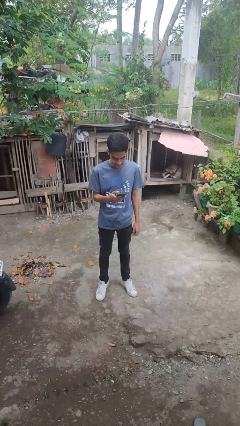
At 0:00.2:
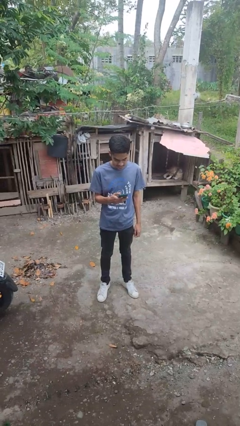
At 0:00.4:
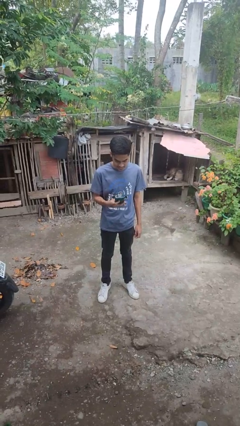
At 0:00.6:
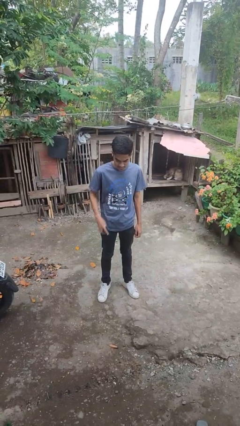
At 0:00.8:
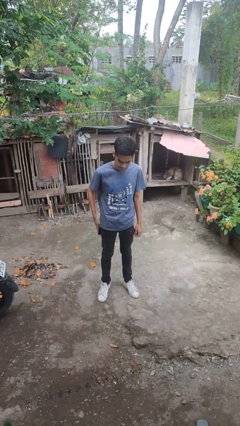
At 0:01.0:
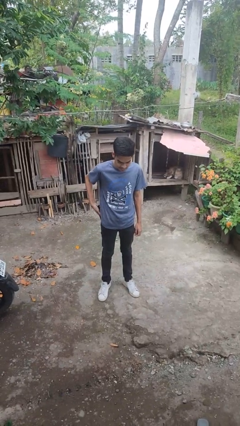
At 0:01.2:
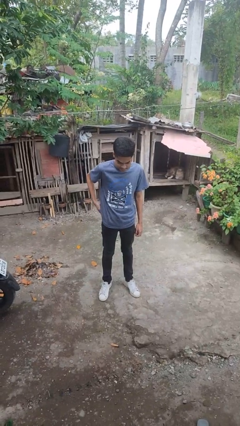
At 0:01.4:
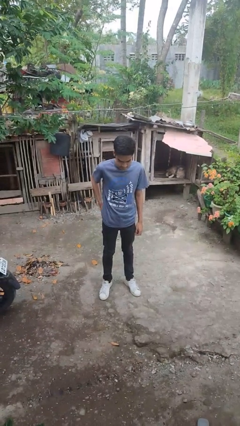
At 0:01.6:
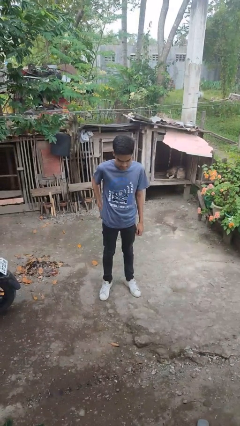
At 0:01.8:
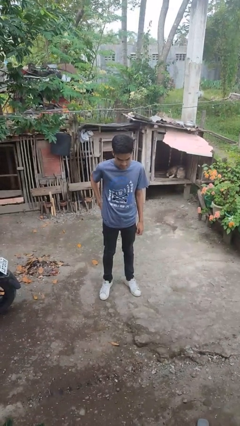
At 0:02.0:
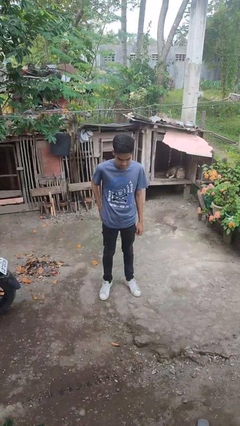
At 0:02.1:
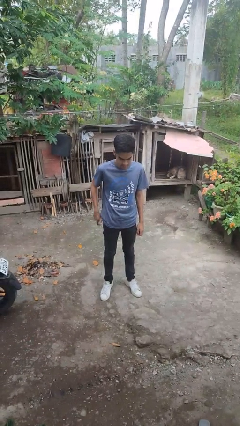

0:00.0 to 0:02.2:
person puts phone into pocket

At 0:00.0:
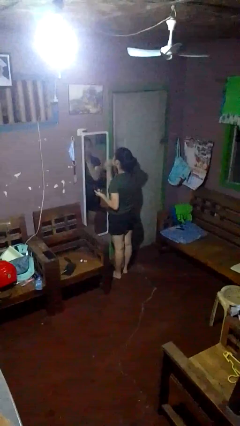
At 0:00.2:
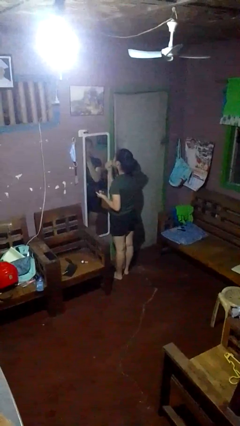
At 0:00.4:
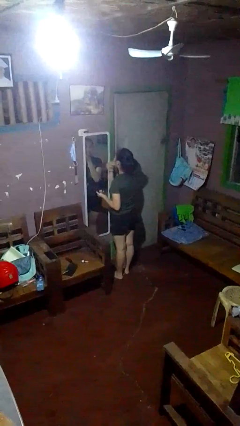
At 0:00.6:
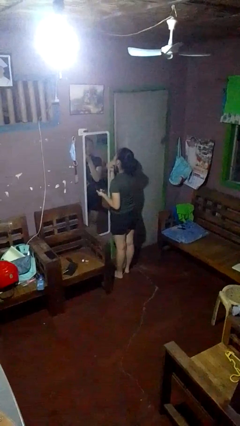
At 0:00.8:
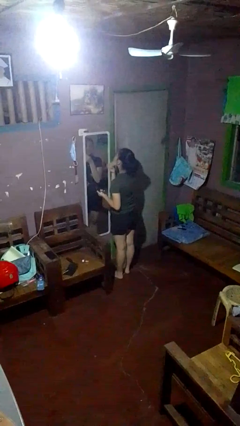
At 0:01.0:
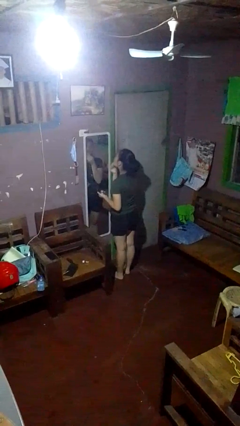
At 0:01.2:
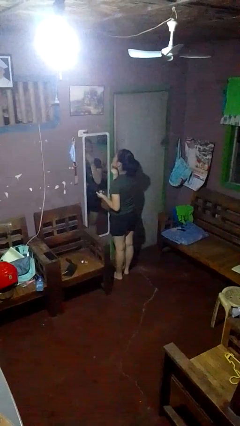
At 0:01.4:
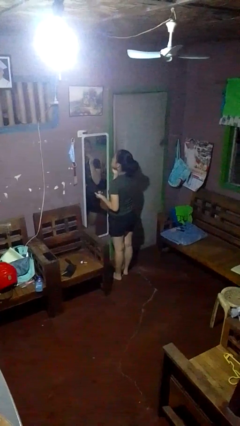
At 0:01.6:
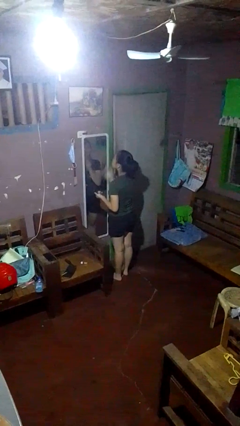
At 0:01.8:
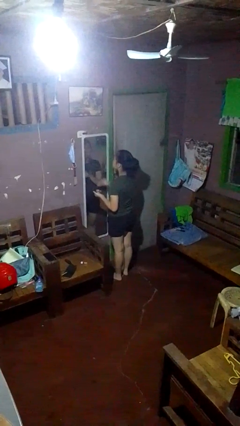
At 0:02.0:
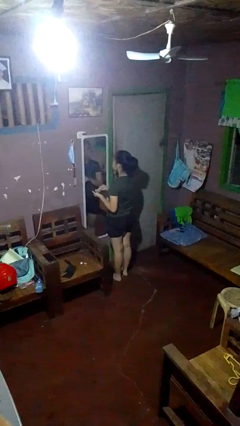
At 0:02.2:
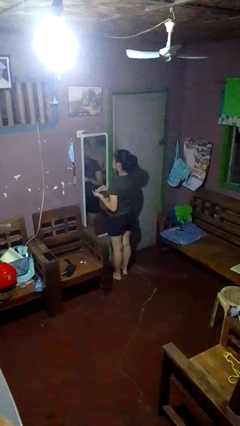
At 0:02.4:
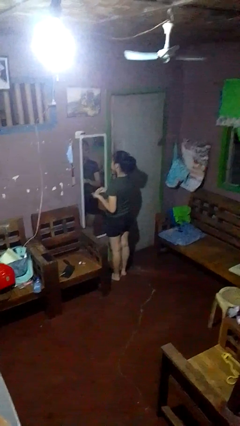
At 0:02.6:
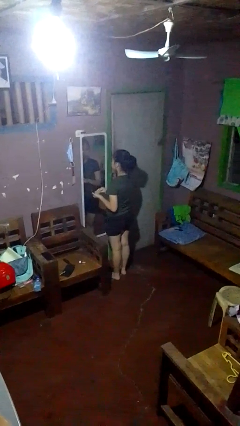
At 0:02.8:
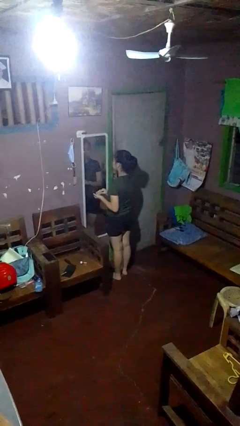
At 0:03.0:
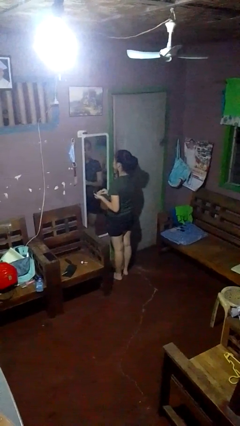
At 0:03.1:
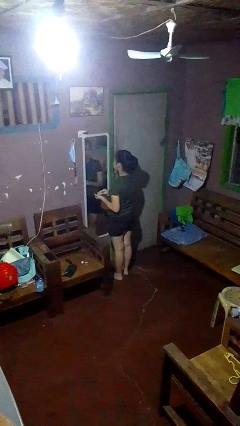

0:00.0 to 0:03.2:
person applies foundation makeup

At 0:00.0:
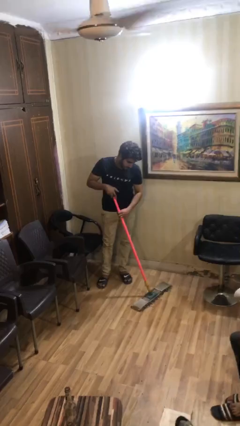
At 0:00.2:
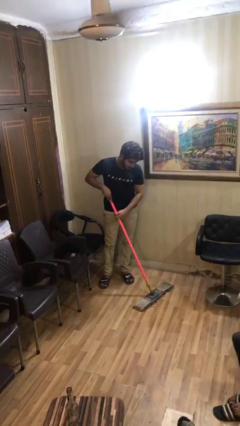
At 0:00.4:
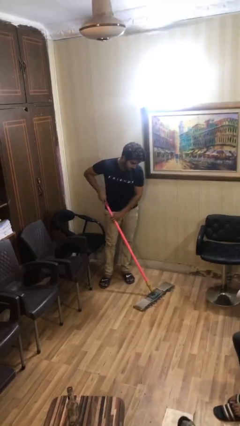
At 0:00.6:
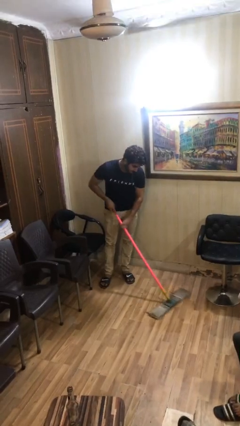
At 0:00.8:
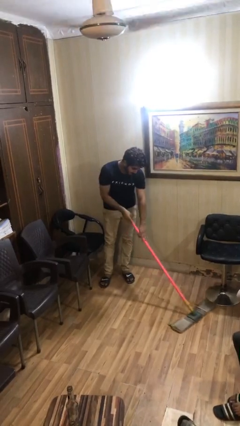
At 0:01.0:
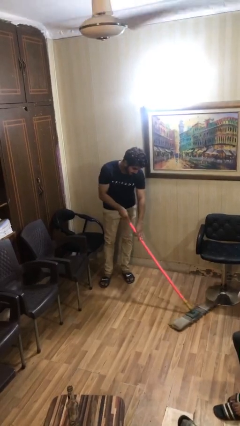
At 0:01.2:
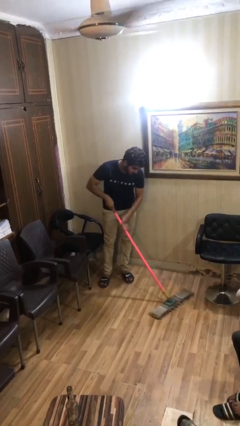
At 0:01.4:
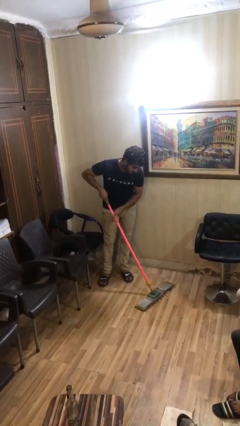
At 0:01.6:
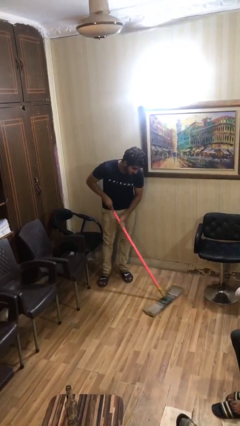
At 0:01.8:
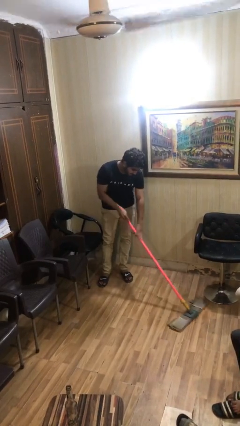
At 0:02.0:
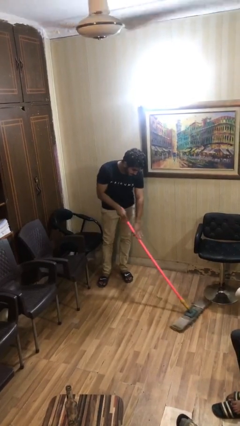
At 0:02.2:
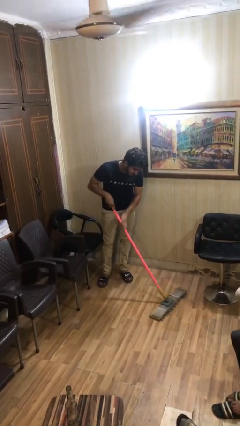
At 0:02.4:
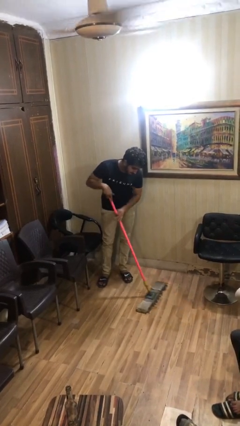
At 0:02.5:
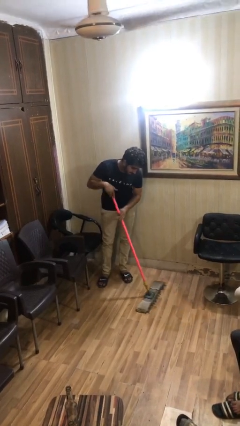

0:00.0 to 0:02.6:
person sweeps floor

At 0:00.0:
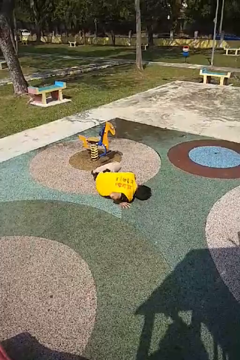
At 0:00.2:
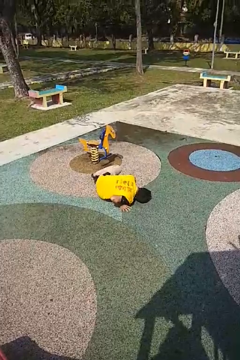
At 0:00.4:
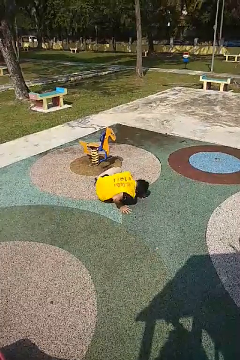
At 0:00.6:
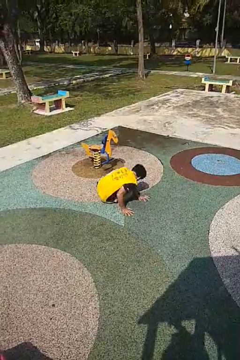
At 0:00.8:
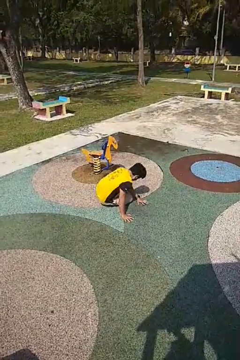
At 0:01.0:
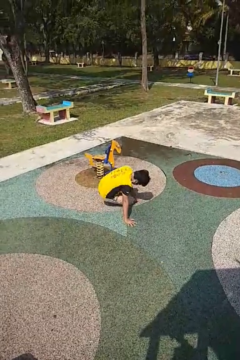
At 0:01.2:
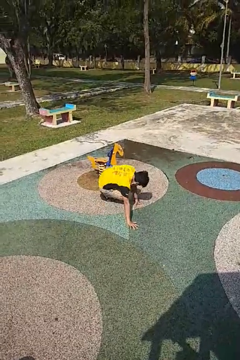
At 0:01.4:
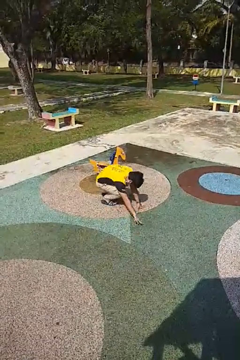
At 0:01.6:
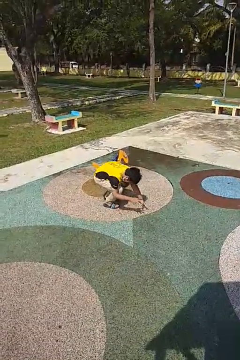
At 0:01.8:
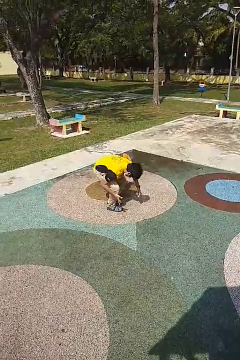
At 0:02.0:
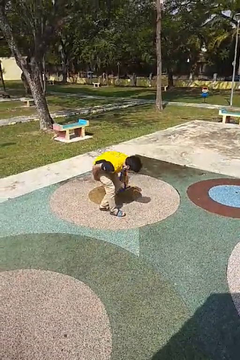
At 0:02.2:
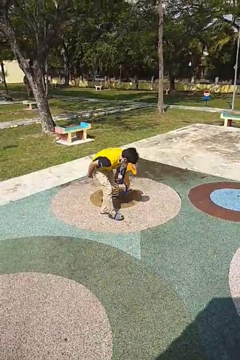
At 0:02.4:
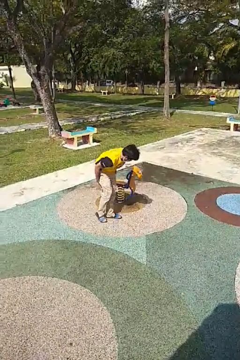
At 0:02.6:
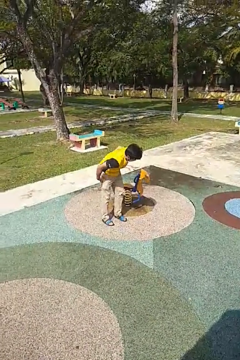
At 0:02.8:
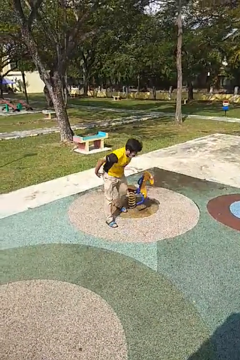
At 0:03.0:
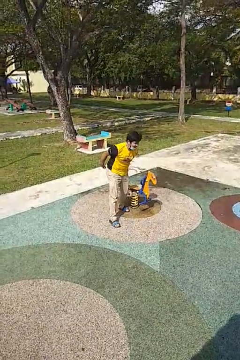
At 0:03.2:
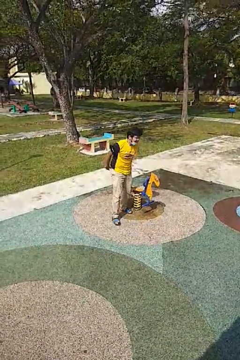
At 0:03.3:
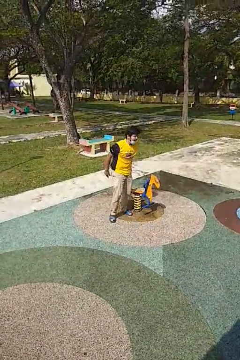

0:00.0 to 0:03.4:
person stands up from floor

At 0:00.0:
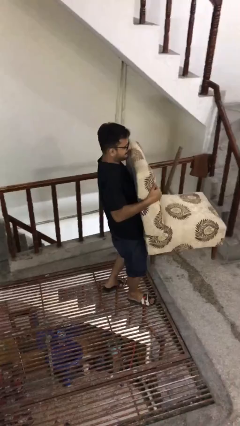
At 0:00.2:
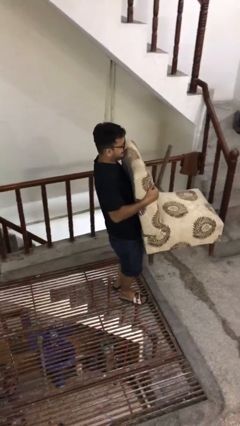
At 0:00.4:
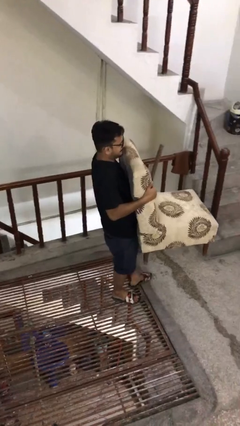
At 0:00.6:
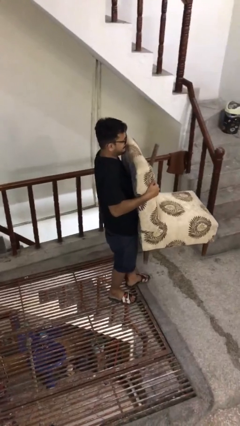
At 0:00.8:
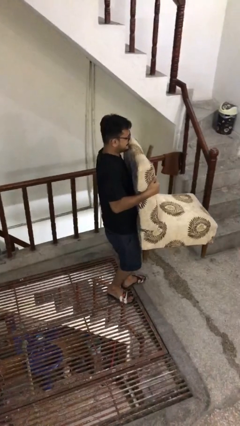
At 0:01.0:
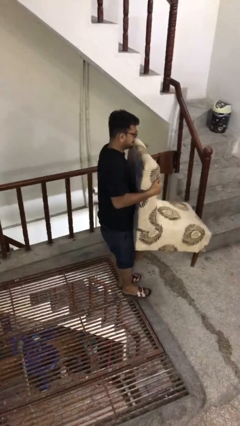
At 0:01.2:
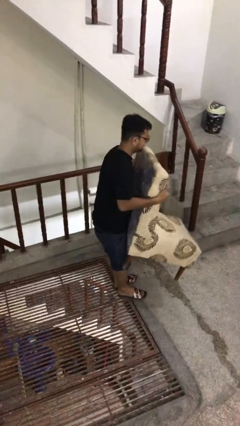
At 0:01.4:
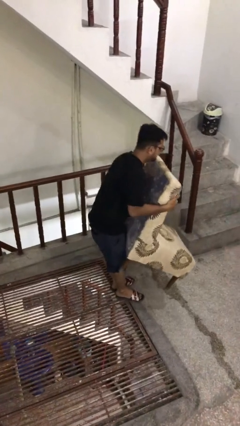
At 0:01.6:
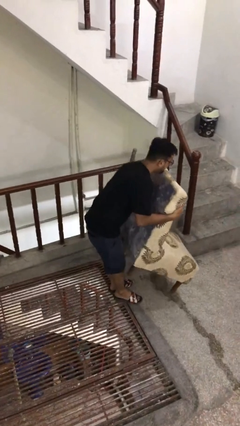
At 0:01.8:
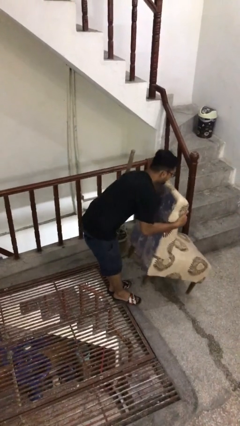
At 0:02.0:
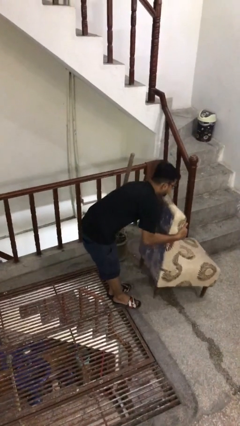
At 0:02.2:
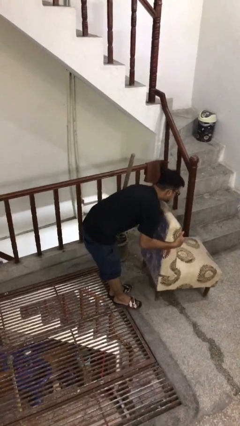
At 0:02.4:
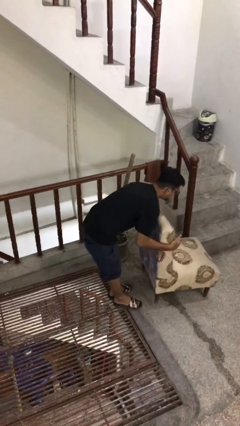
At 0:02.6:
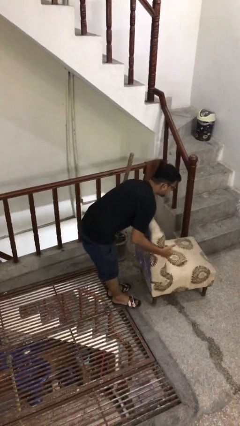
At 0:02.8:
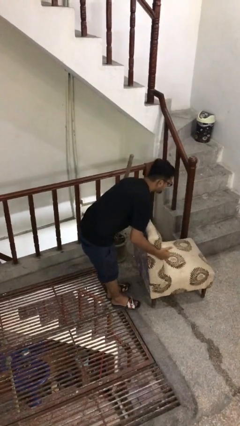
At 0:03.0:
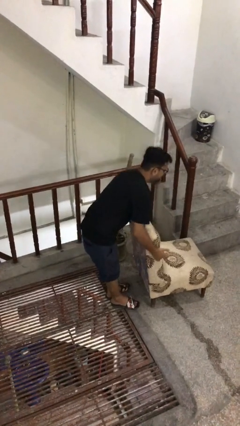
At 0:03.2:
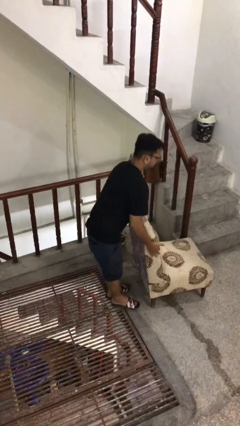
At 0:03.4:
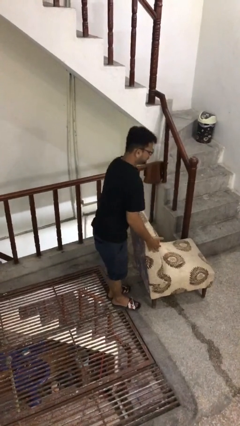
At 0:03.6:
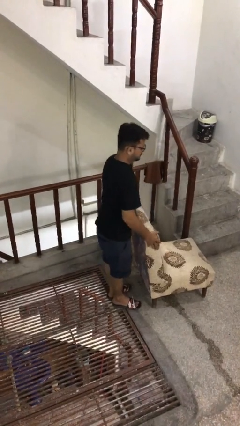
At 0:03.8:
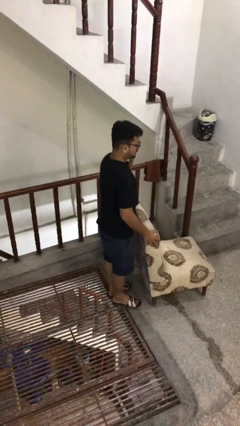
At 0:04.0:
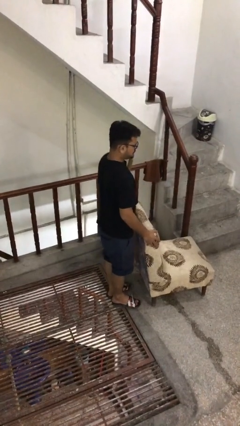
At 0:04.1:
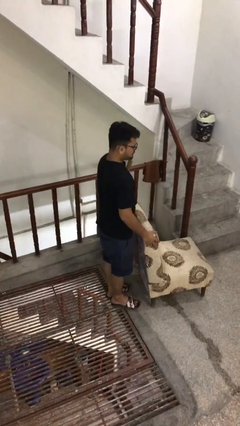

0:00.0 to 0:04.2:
person puts down object on floor

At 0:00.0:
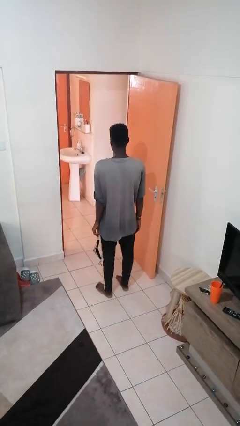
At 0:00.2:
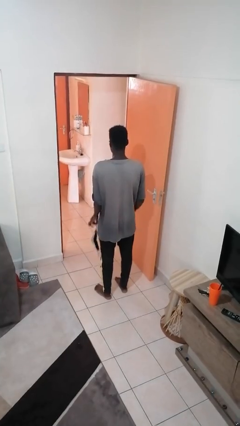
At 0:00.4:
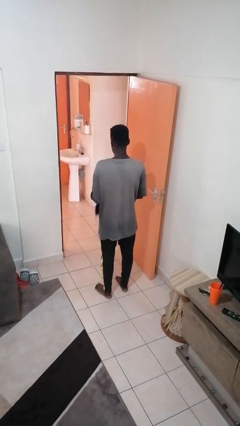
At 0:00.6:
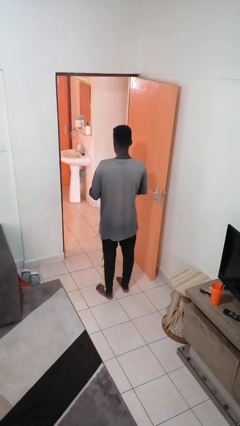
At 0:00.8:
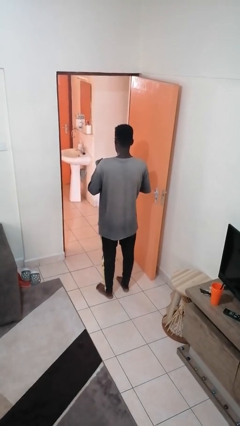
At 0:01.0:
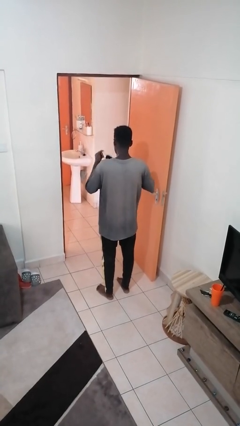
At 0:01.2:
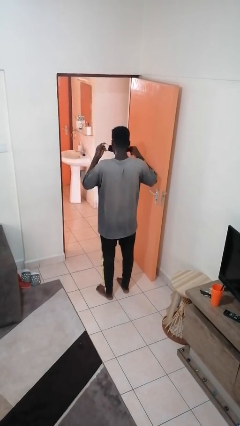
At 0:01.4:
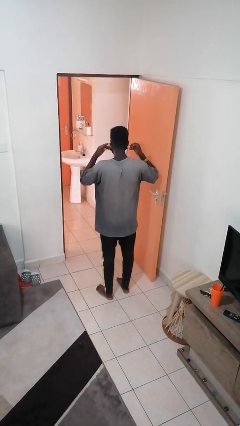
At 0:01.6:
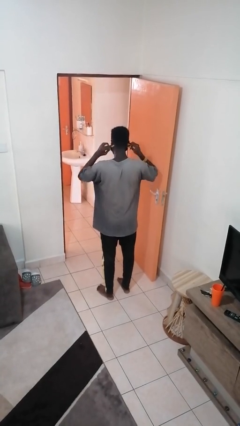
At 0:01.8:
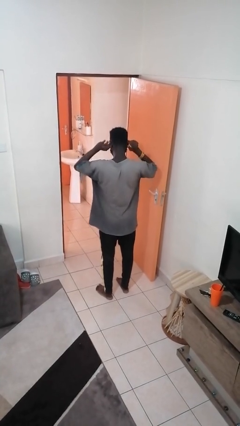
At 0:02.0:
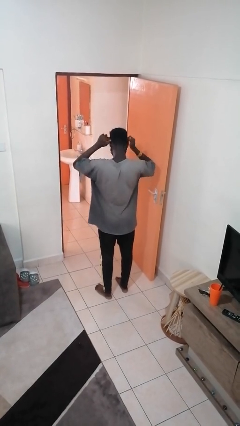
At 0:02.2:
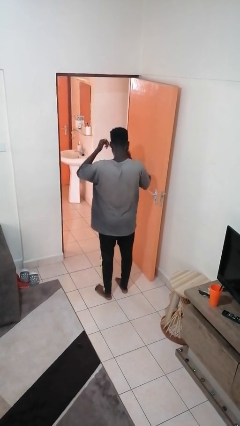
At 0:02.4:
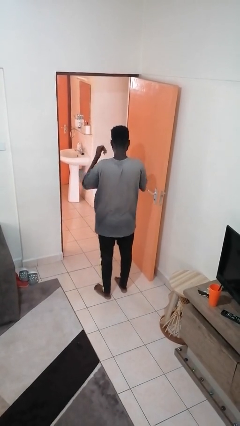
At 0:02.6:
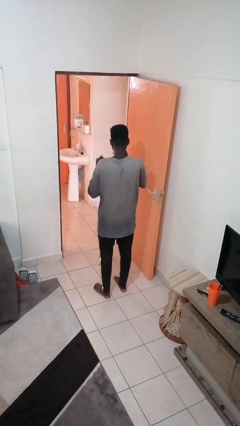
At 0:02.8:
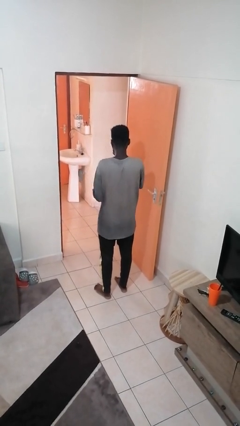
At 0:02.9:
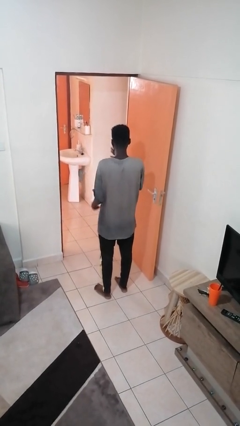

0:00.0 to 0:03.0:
person puts on facemask
